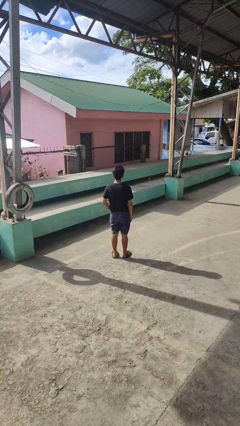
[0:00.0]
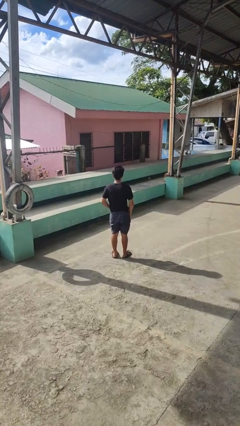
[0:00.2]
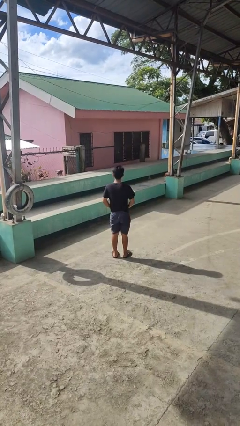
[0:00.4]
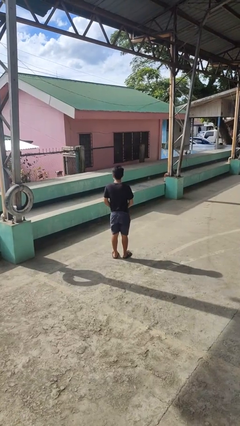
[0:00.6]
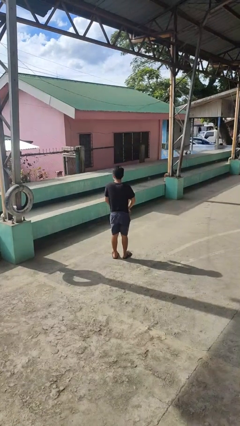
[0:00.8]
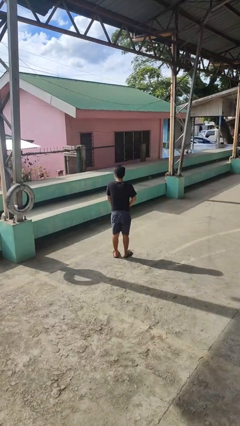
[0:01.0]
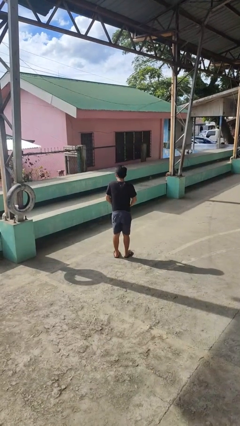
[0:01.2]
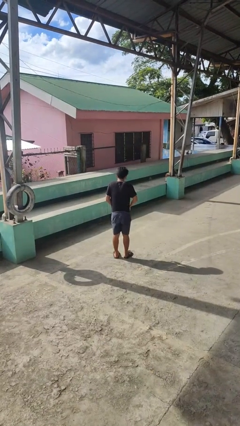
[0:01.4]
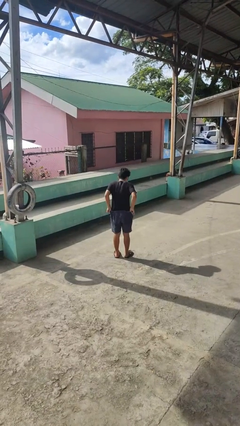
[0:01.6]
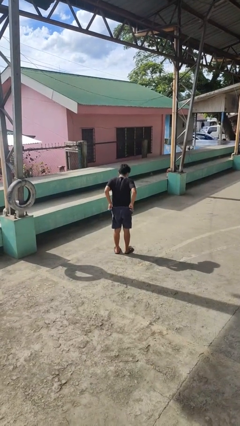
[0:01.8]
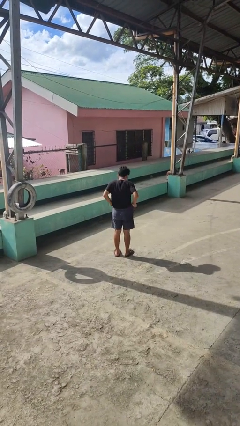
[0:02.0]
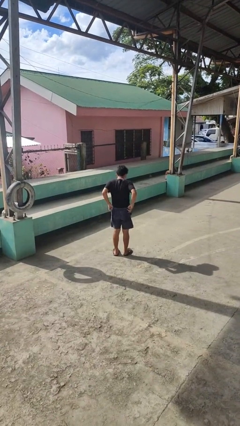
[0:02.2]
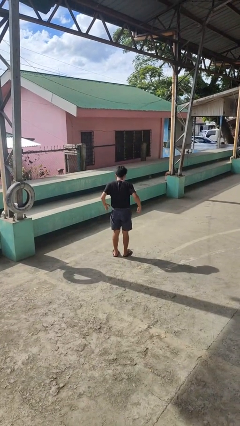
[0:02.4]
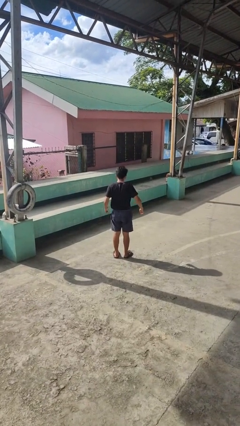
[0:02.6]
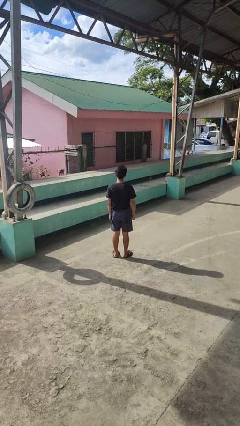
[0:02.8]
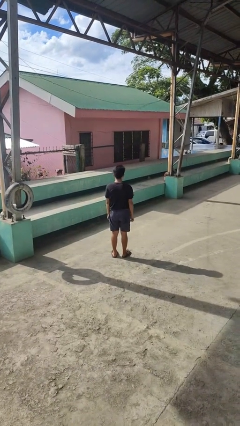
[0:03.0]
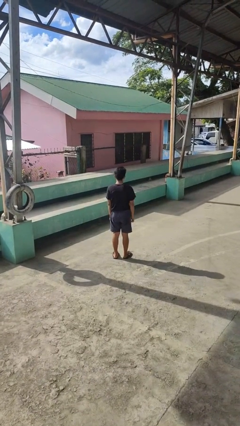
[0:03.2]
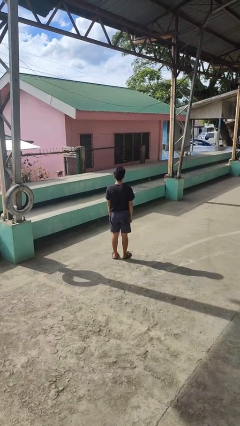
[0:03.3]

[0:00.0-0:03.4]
person hikes up pants

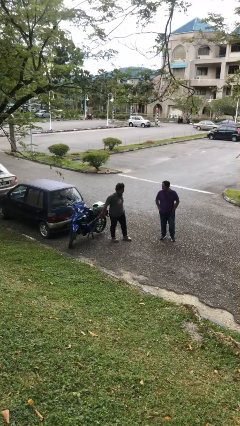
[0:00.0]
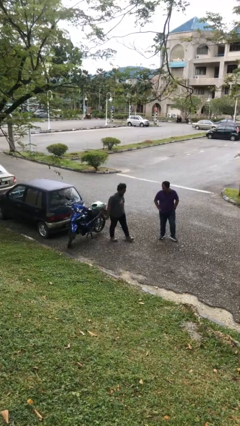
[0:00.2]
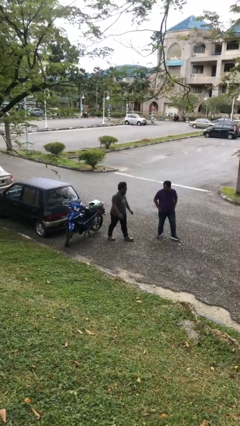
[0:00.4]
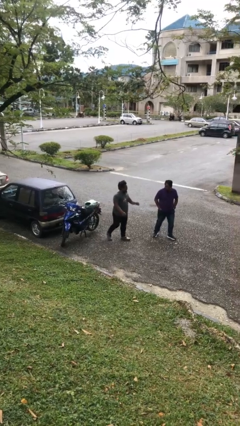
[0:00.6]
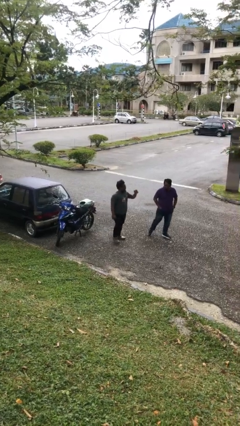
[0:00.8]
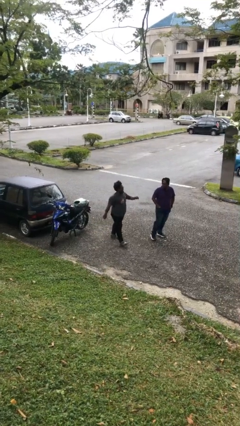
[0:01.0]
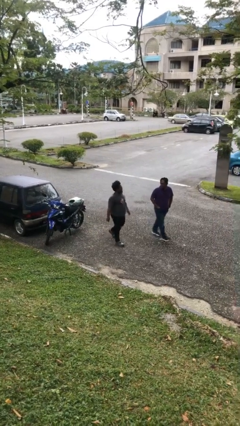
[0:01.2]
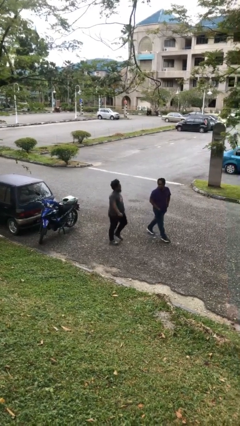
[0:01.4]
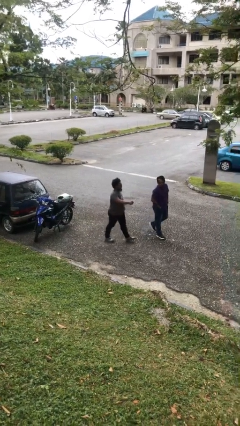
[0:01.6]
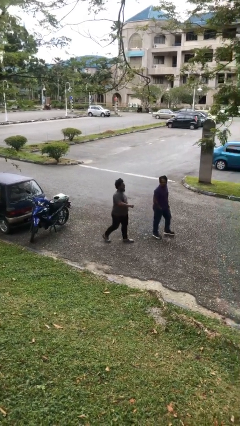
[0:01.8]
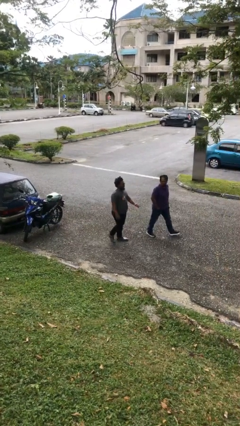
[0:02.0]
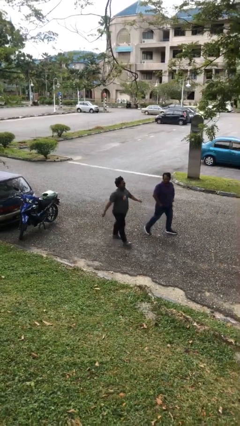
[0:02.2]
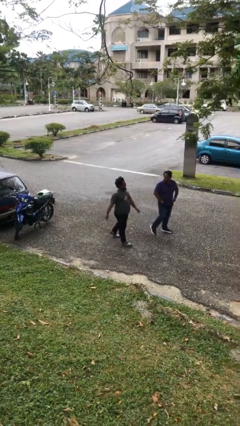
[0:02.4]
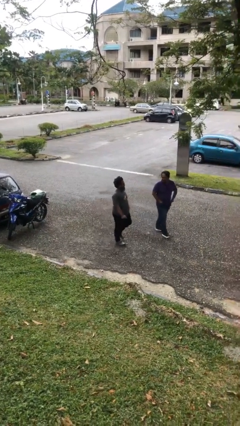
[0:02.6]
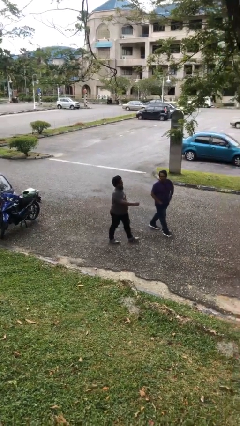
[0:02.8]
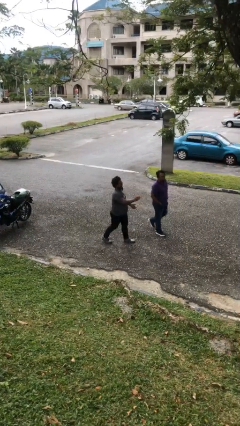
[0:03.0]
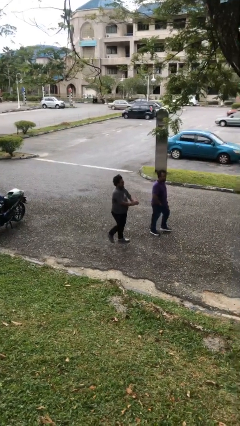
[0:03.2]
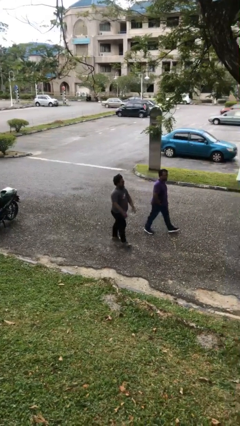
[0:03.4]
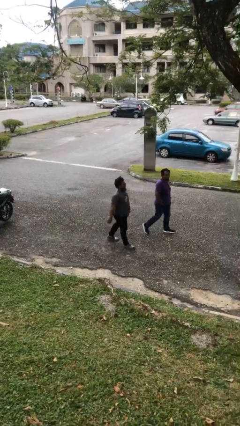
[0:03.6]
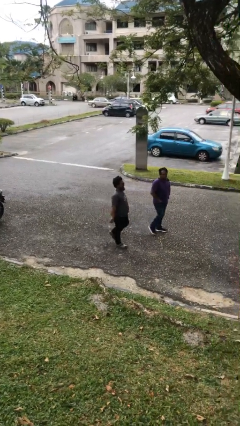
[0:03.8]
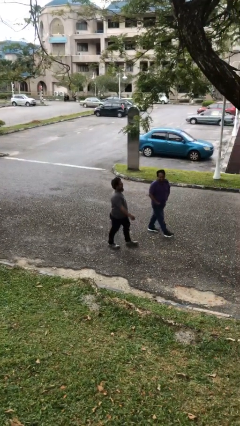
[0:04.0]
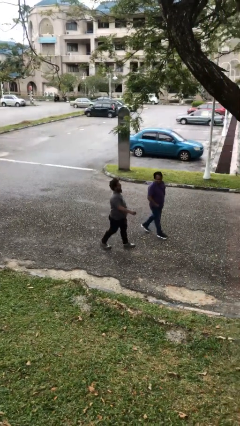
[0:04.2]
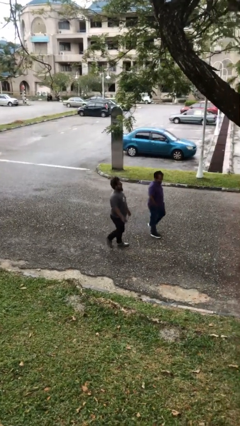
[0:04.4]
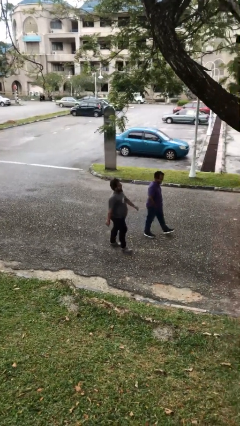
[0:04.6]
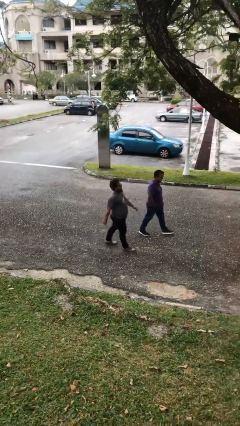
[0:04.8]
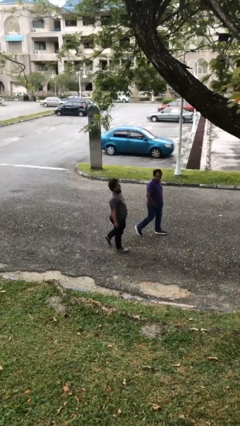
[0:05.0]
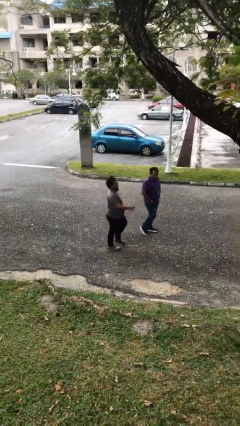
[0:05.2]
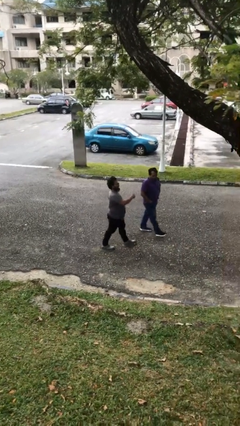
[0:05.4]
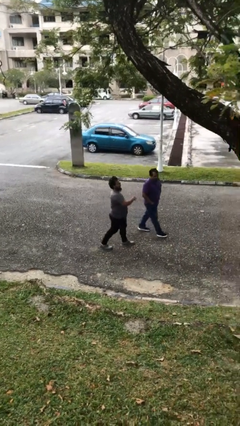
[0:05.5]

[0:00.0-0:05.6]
person talks to person

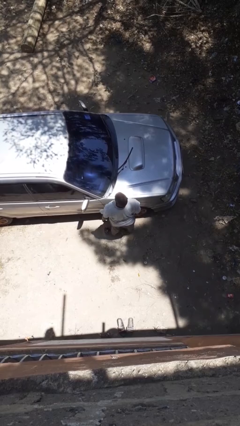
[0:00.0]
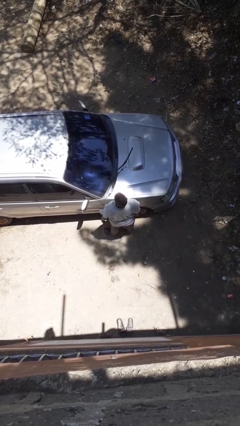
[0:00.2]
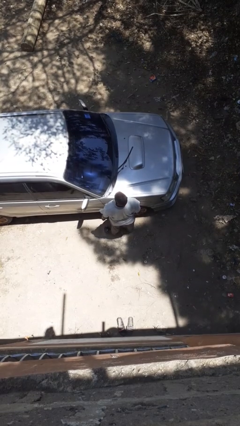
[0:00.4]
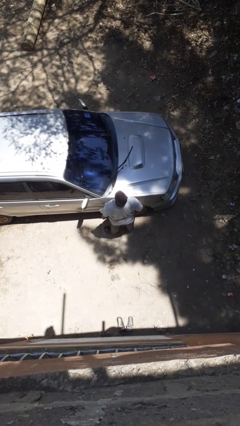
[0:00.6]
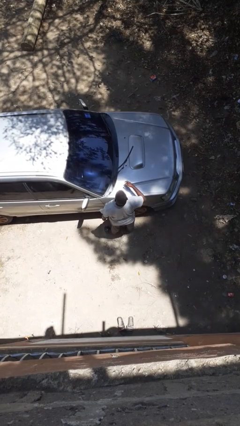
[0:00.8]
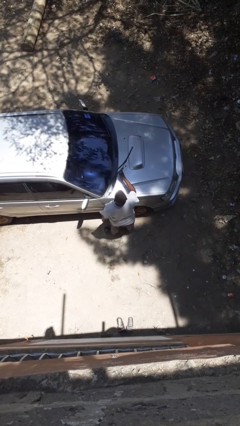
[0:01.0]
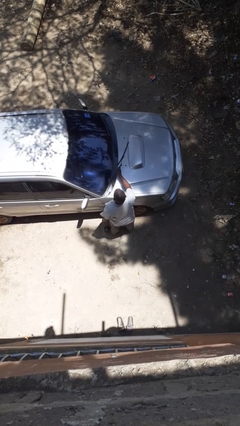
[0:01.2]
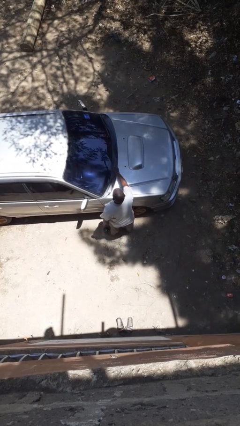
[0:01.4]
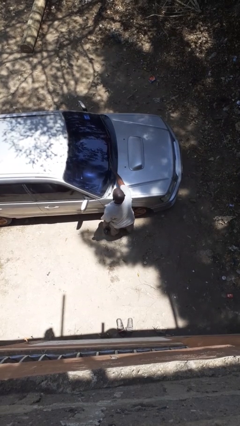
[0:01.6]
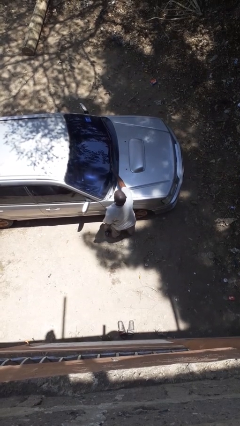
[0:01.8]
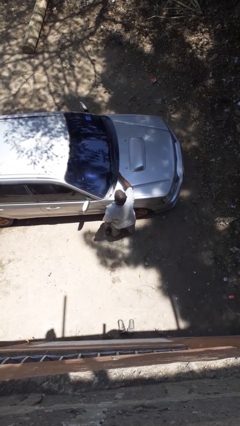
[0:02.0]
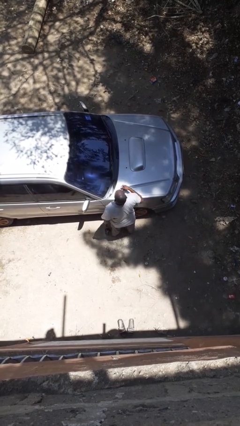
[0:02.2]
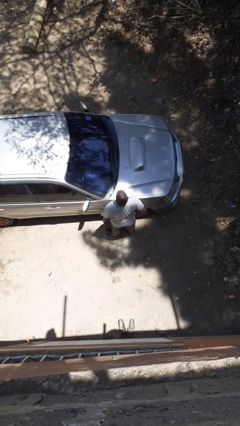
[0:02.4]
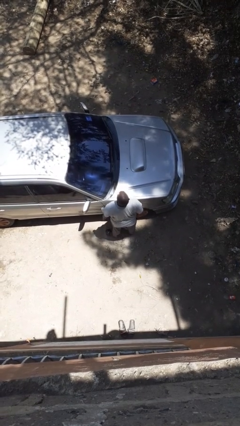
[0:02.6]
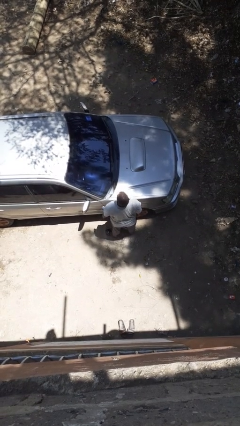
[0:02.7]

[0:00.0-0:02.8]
person flips down car wipers

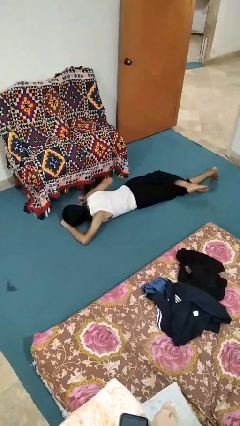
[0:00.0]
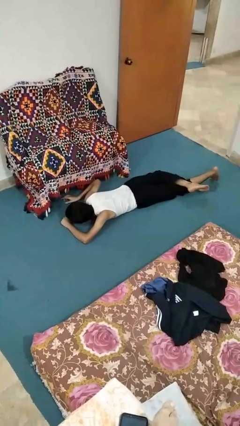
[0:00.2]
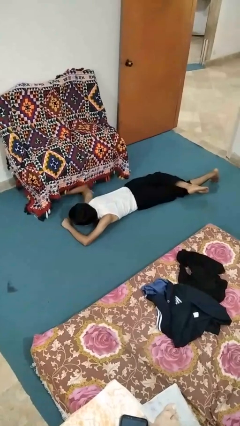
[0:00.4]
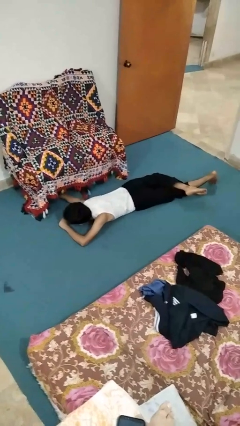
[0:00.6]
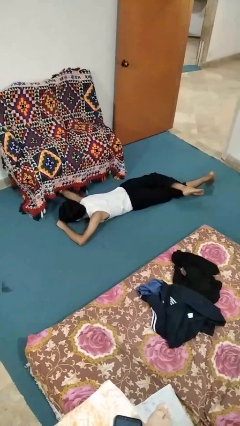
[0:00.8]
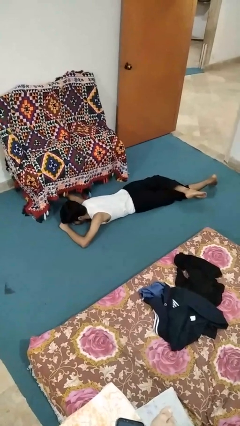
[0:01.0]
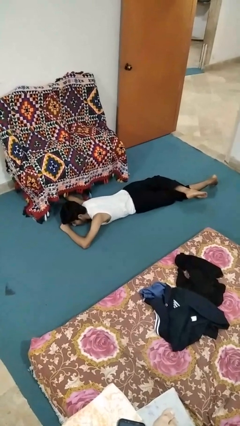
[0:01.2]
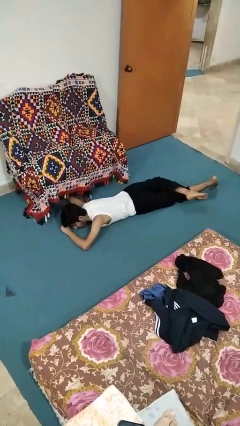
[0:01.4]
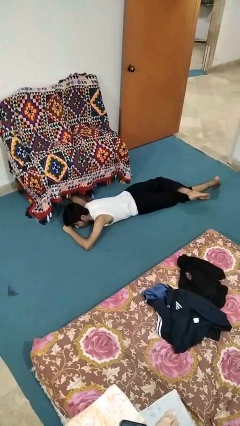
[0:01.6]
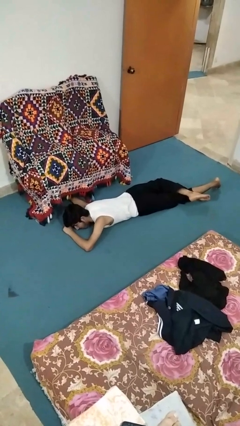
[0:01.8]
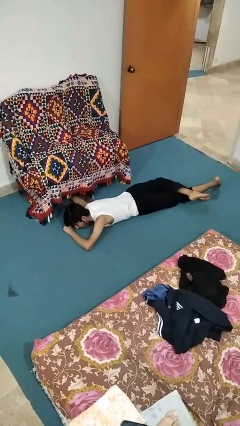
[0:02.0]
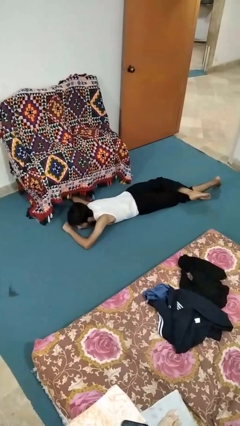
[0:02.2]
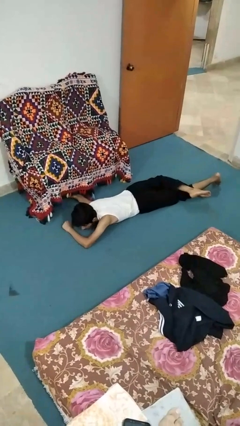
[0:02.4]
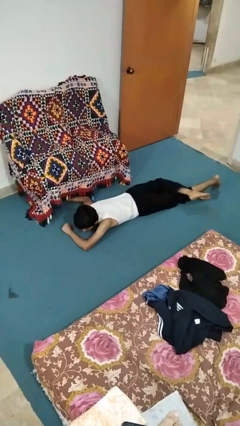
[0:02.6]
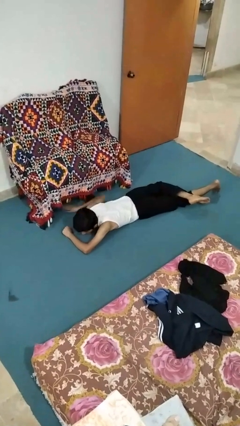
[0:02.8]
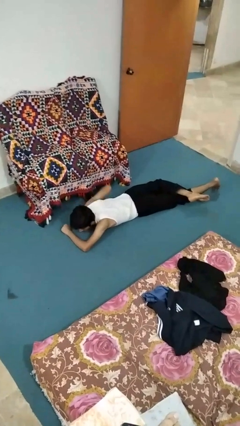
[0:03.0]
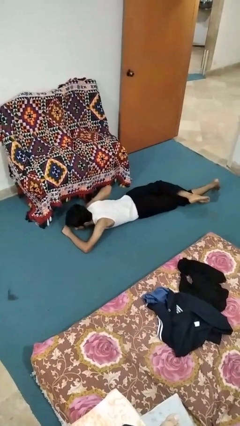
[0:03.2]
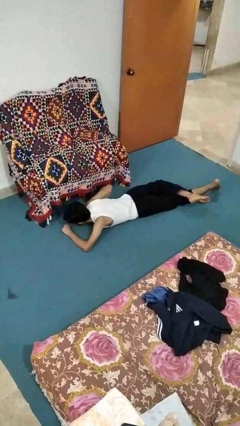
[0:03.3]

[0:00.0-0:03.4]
person searches under couch

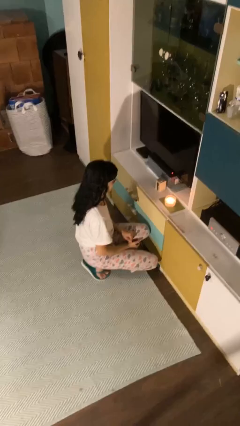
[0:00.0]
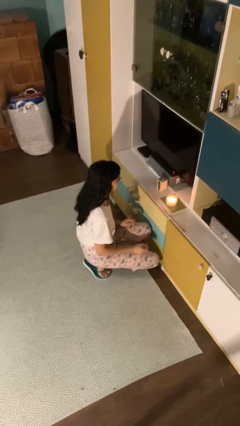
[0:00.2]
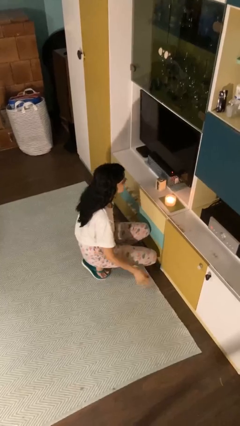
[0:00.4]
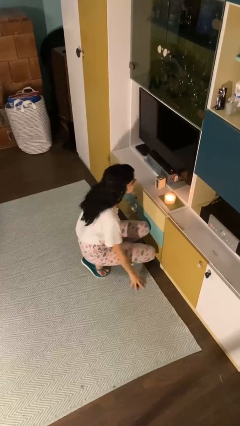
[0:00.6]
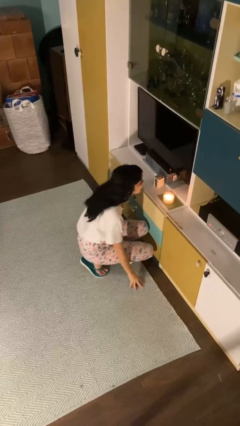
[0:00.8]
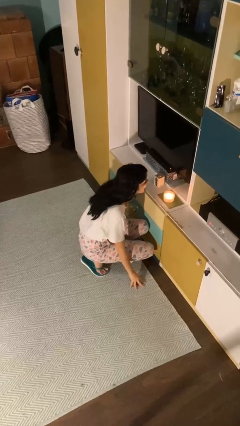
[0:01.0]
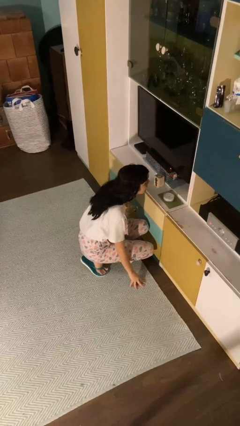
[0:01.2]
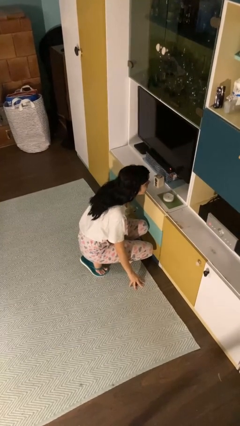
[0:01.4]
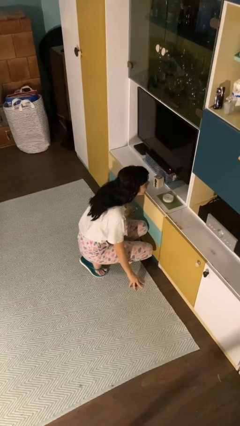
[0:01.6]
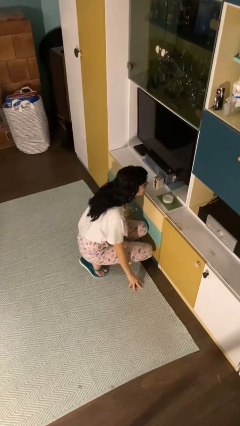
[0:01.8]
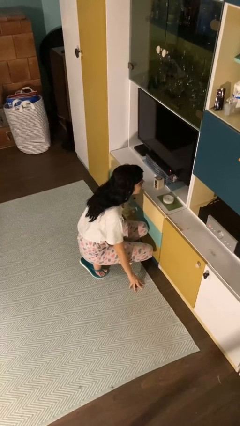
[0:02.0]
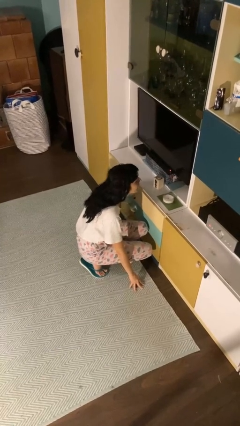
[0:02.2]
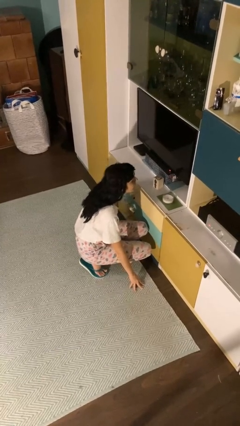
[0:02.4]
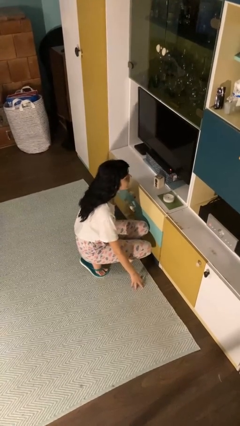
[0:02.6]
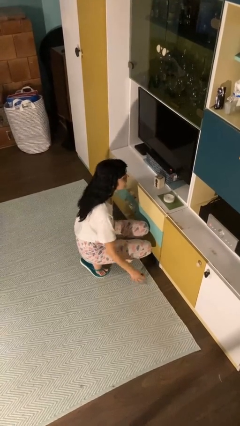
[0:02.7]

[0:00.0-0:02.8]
person extinguishes candle
